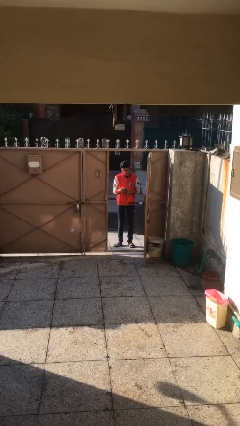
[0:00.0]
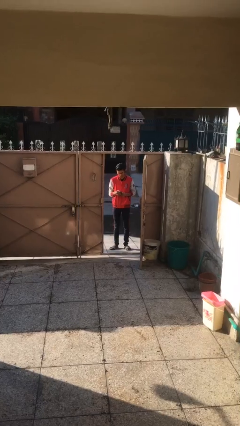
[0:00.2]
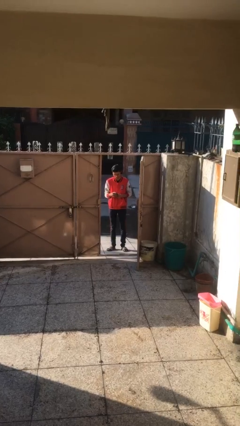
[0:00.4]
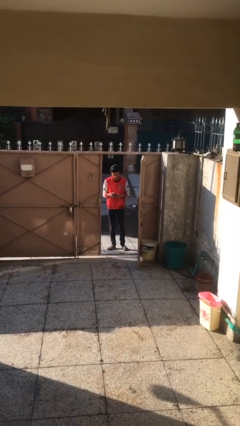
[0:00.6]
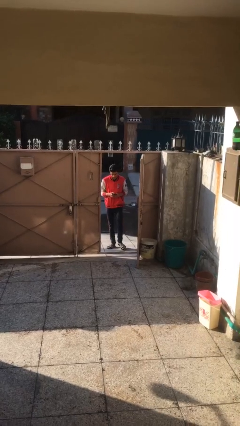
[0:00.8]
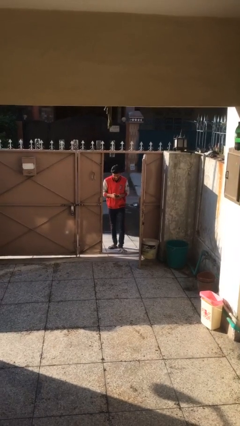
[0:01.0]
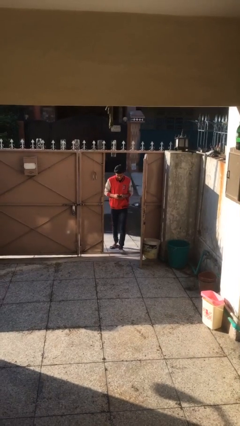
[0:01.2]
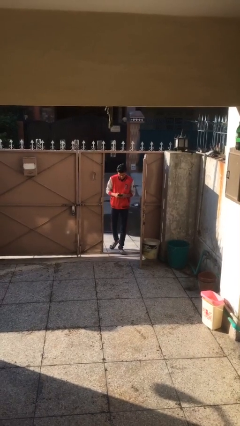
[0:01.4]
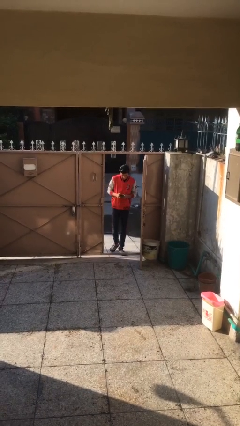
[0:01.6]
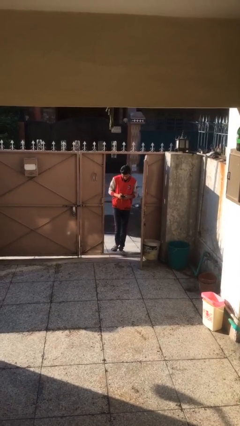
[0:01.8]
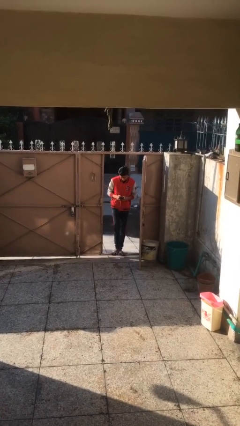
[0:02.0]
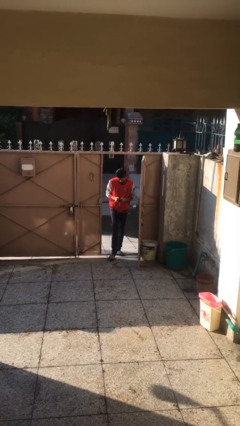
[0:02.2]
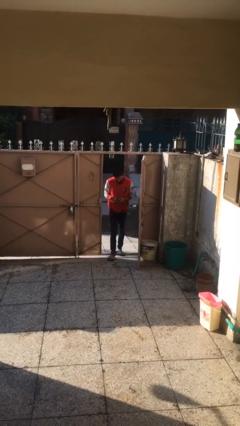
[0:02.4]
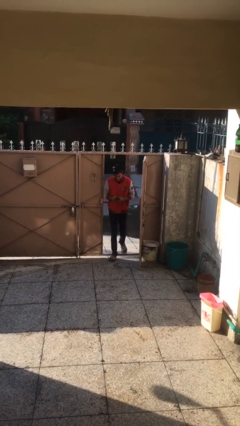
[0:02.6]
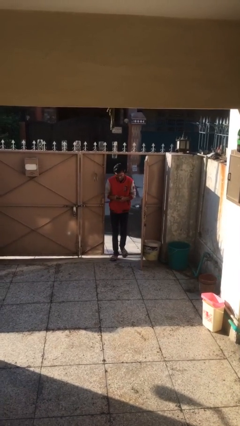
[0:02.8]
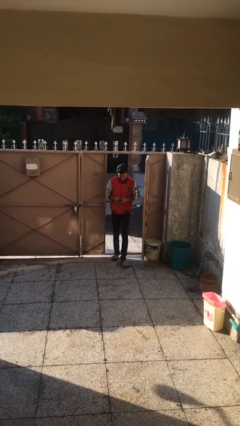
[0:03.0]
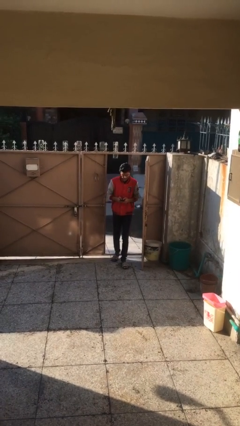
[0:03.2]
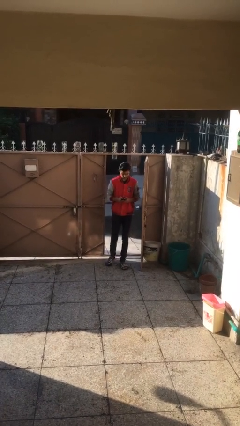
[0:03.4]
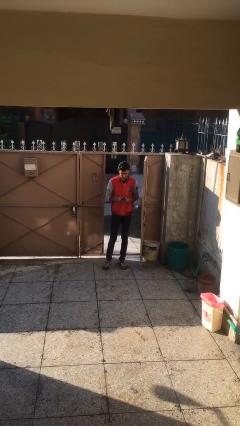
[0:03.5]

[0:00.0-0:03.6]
person enters scene through structure

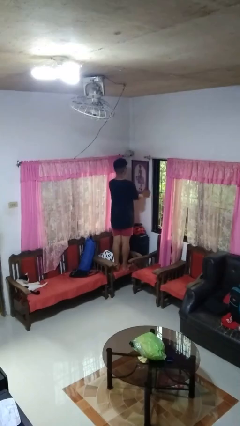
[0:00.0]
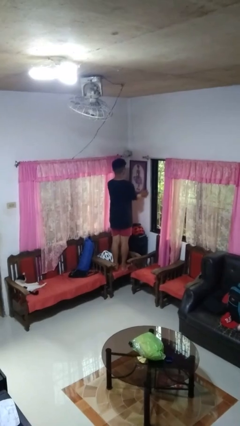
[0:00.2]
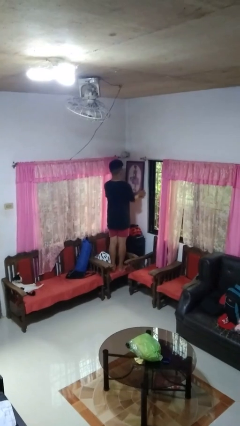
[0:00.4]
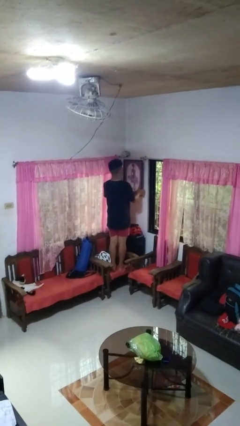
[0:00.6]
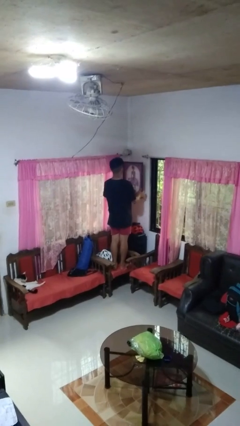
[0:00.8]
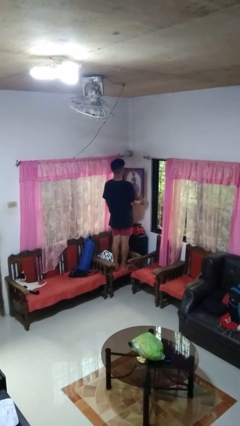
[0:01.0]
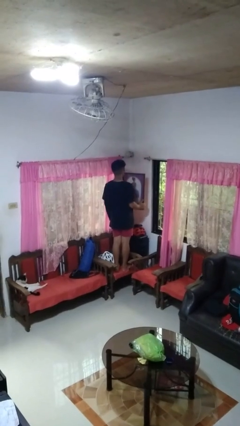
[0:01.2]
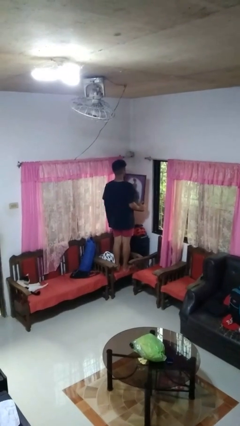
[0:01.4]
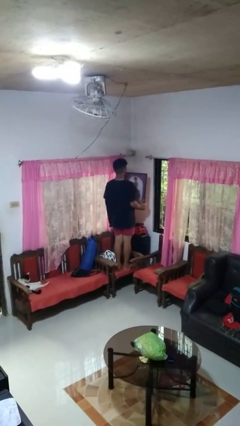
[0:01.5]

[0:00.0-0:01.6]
person takes down picture frame

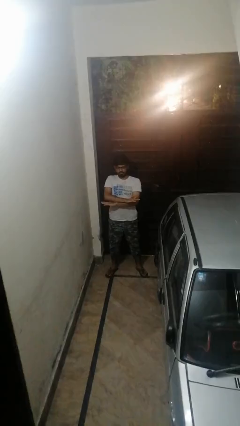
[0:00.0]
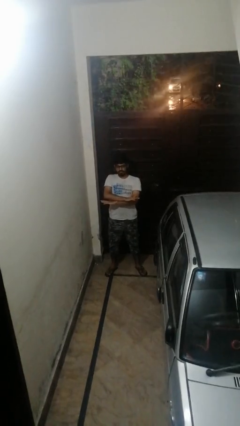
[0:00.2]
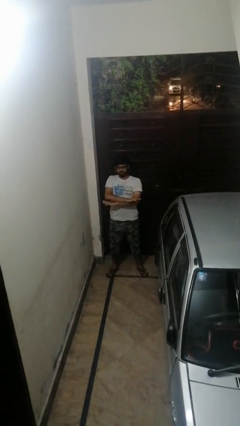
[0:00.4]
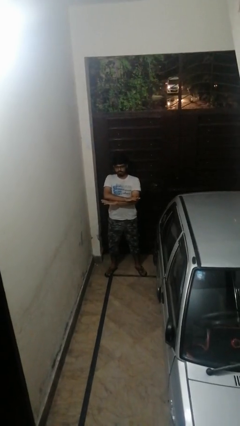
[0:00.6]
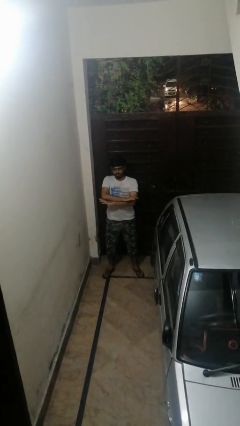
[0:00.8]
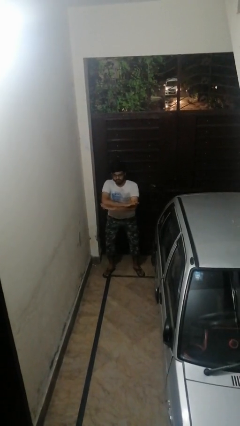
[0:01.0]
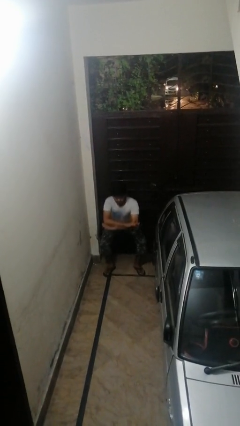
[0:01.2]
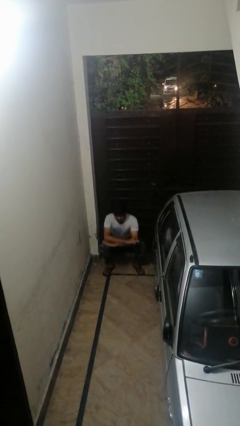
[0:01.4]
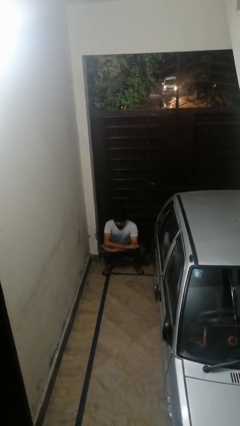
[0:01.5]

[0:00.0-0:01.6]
person squats

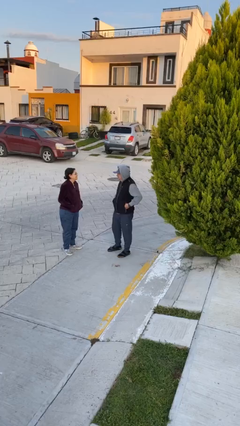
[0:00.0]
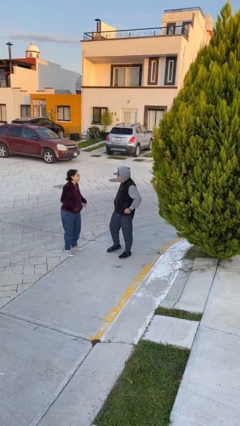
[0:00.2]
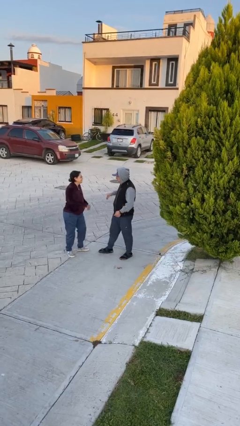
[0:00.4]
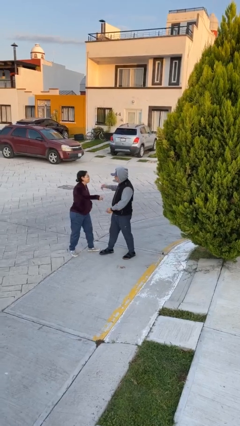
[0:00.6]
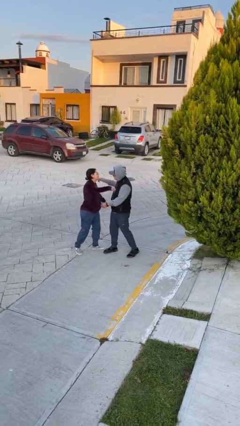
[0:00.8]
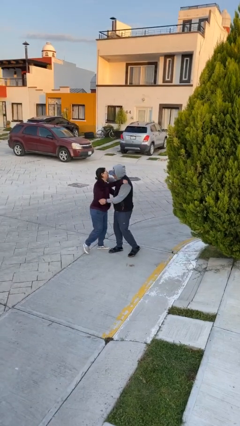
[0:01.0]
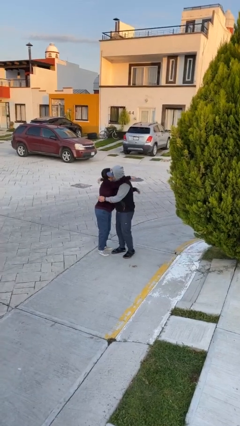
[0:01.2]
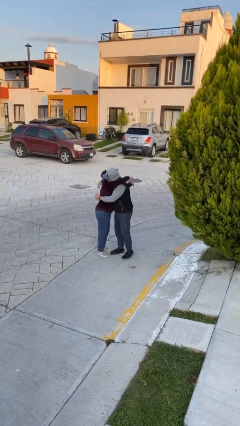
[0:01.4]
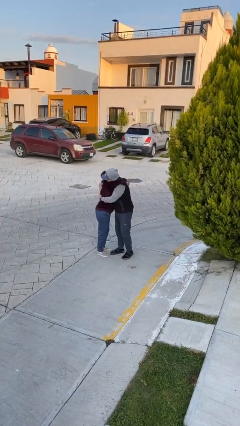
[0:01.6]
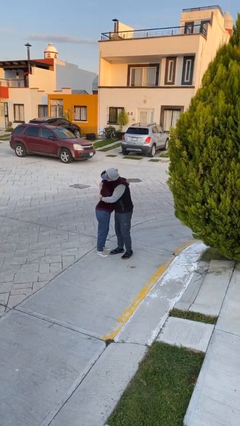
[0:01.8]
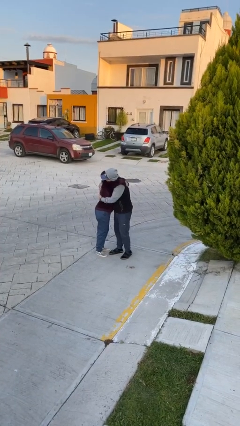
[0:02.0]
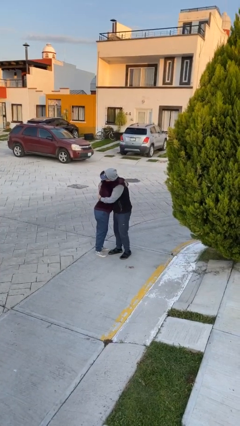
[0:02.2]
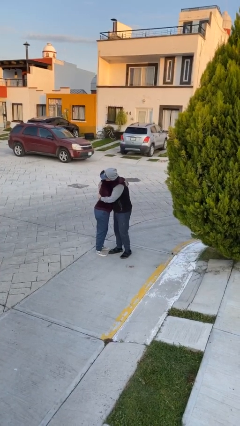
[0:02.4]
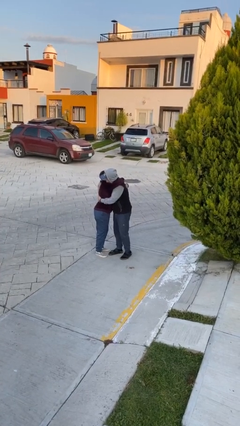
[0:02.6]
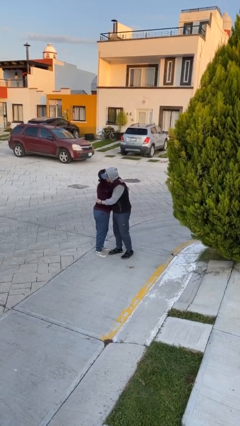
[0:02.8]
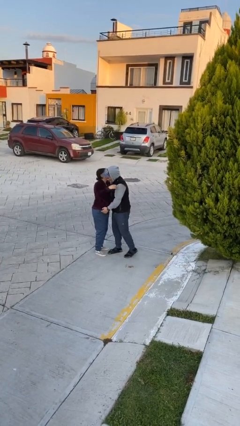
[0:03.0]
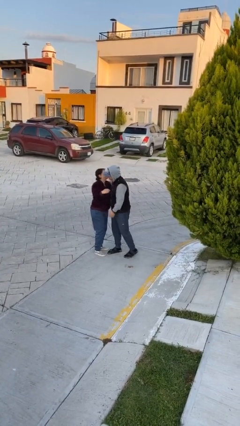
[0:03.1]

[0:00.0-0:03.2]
person embraces person

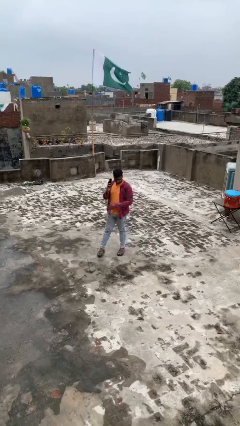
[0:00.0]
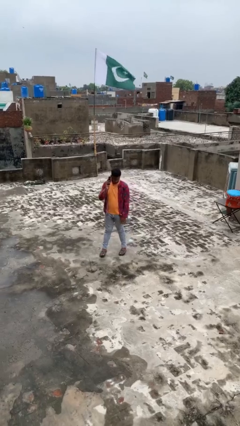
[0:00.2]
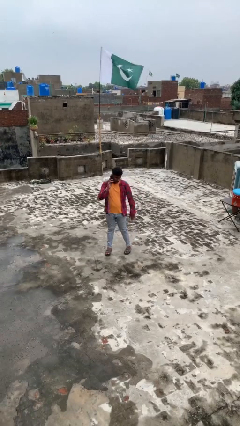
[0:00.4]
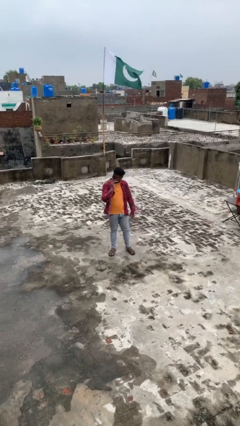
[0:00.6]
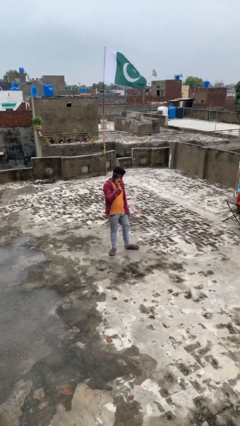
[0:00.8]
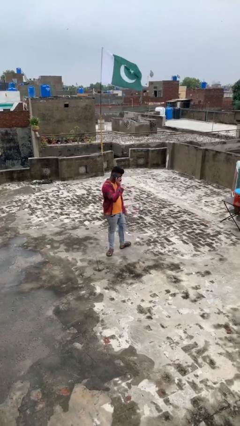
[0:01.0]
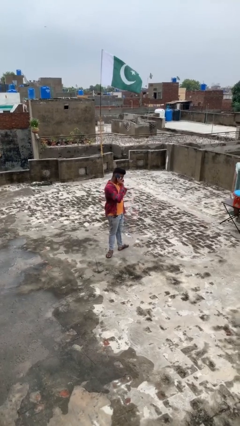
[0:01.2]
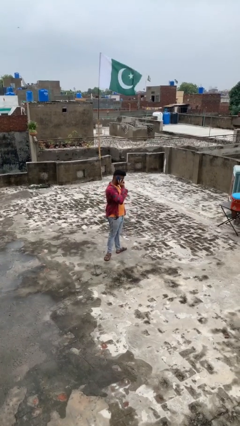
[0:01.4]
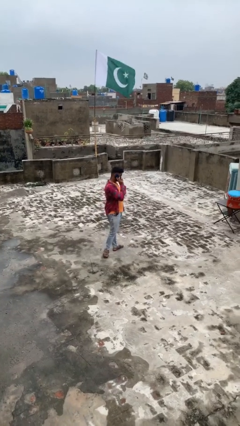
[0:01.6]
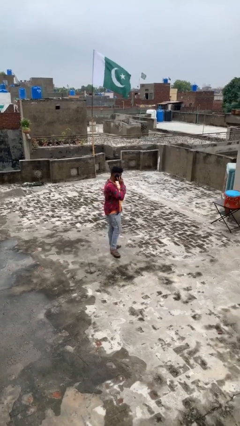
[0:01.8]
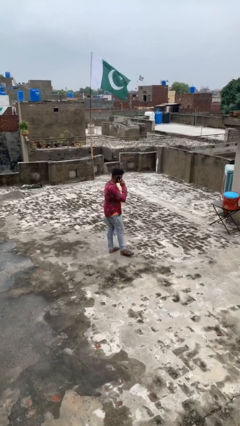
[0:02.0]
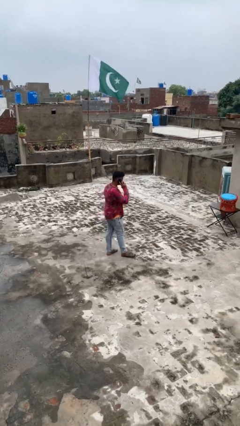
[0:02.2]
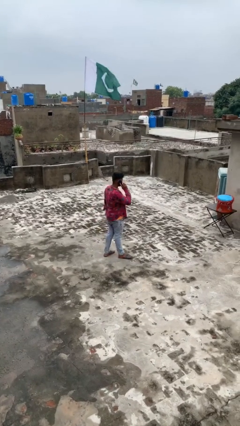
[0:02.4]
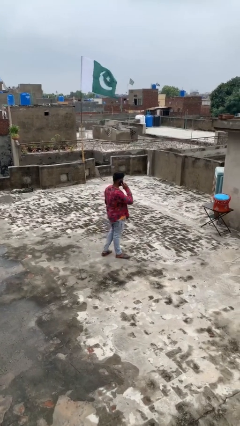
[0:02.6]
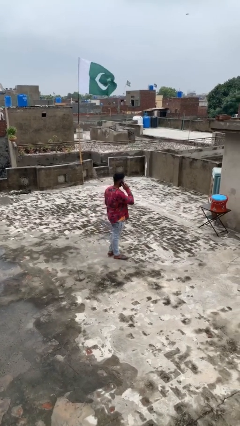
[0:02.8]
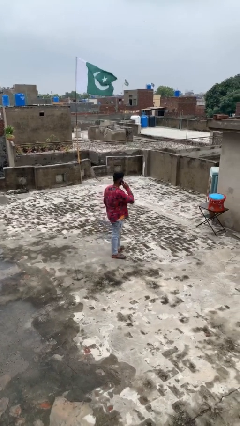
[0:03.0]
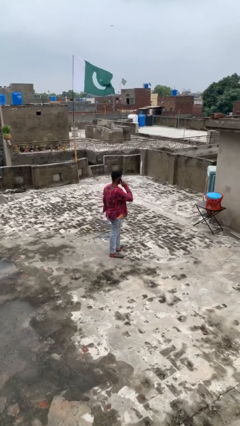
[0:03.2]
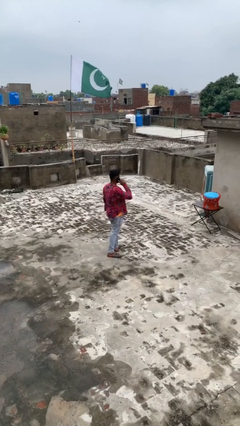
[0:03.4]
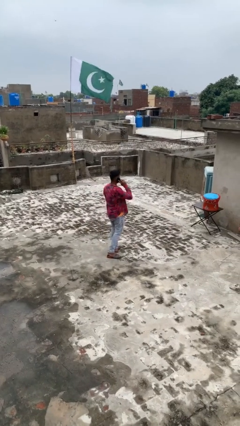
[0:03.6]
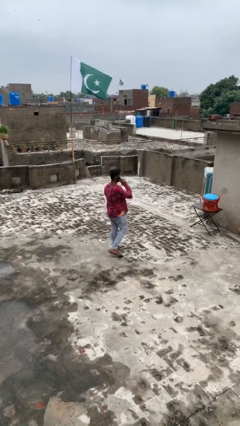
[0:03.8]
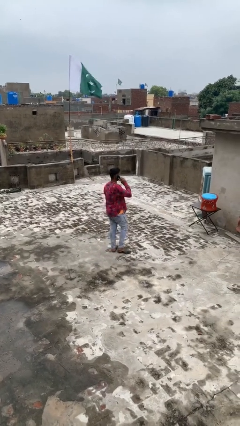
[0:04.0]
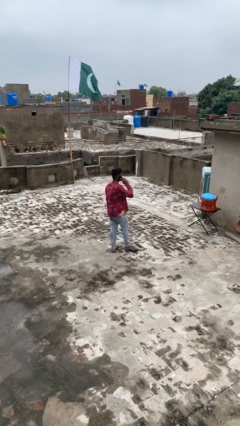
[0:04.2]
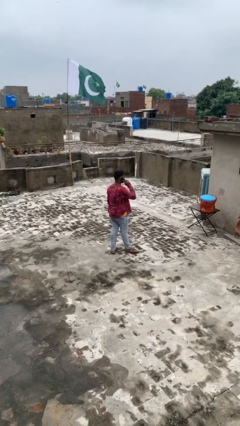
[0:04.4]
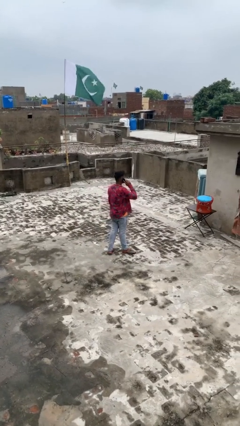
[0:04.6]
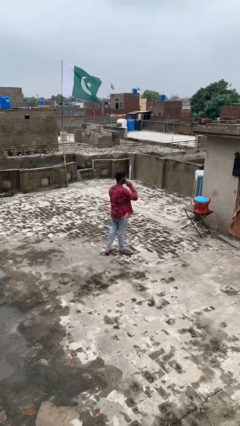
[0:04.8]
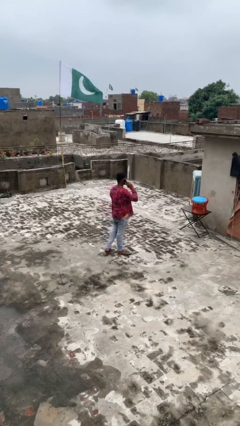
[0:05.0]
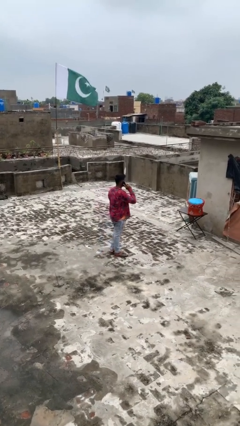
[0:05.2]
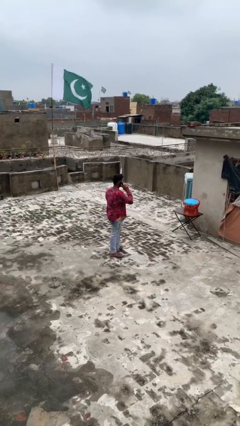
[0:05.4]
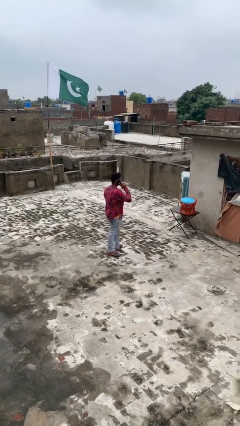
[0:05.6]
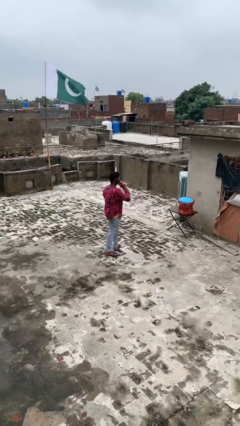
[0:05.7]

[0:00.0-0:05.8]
person talks on phone

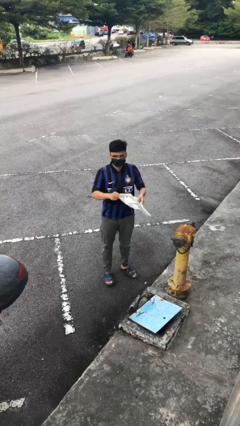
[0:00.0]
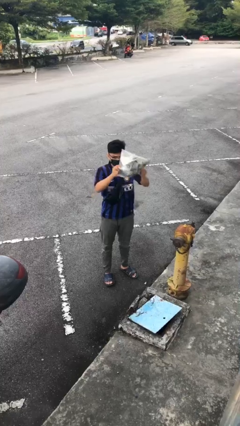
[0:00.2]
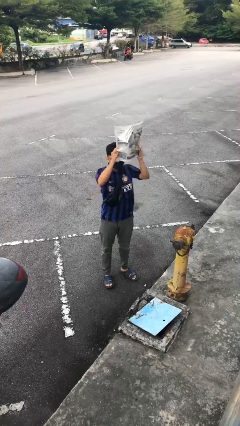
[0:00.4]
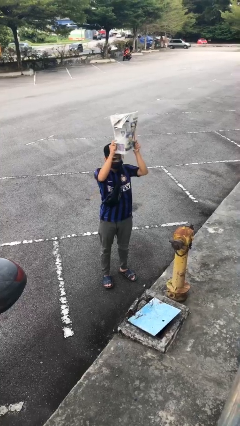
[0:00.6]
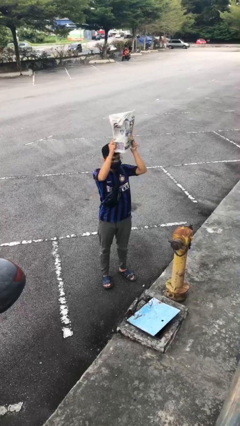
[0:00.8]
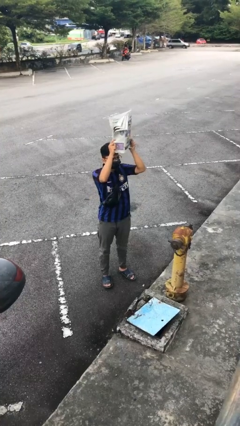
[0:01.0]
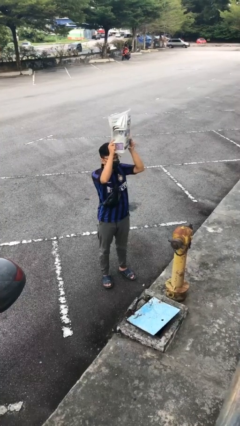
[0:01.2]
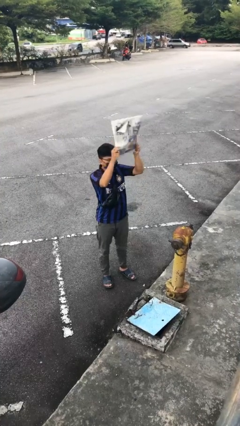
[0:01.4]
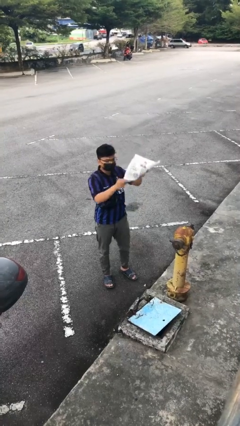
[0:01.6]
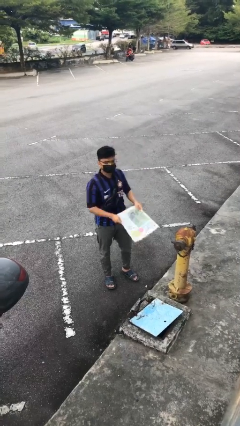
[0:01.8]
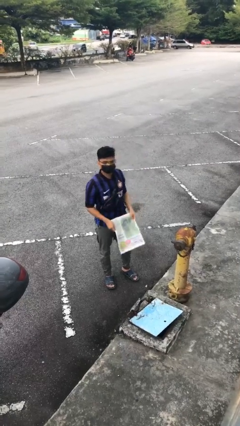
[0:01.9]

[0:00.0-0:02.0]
person holds object above head
